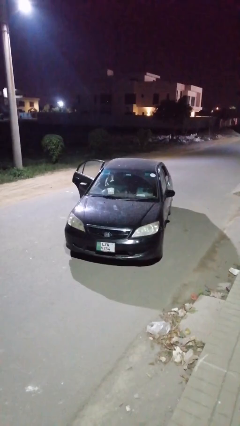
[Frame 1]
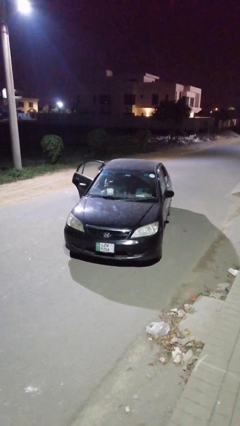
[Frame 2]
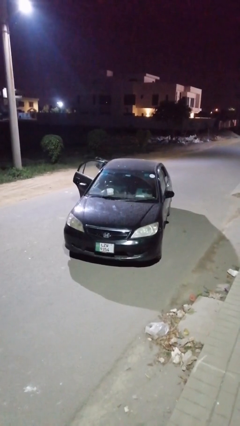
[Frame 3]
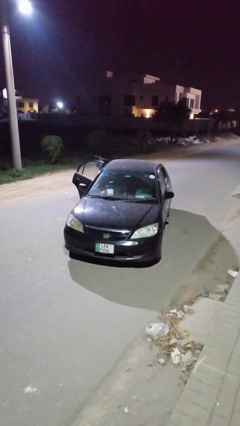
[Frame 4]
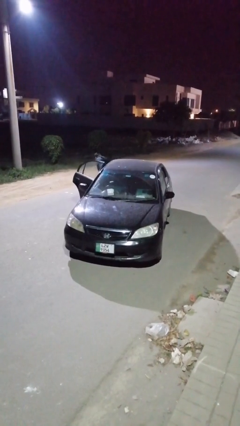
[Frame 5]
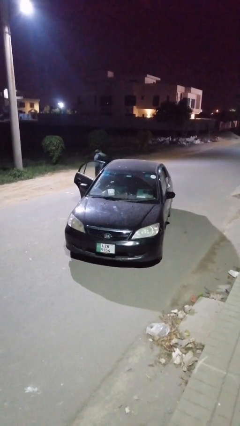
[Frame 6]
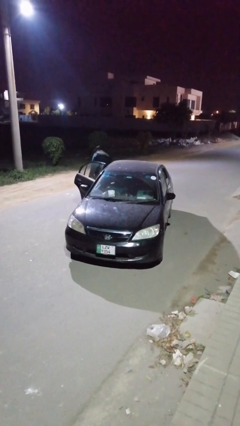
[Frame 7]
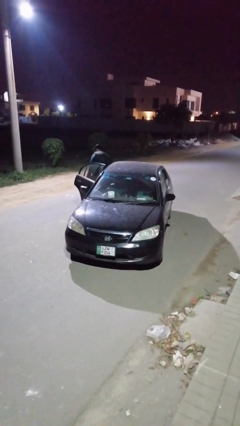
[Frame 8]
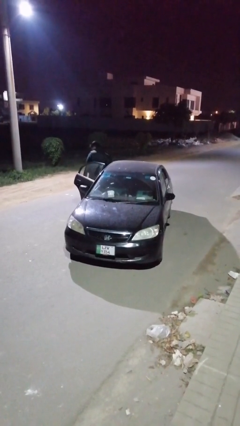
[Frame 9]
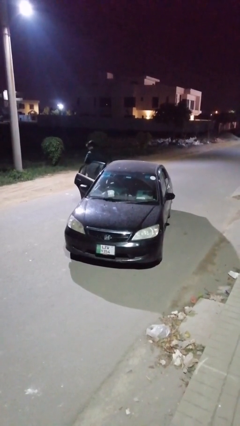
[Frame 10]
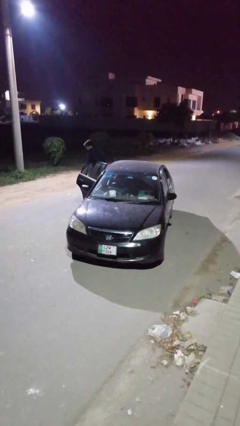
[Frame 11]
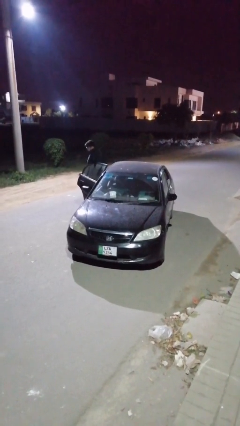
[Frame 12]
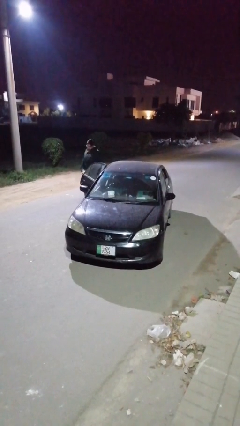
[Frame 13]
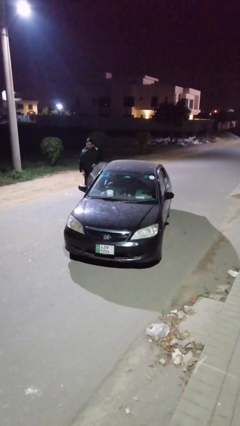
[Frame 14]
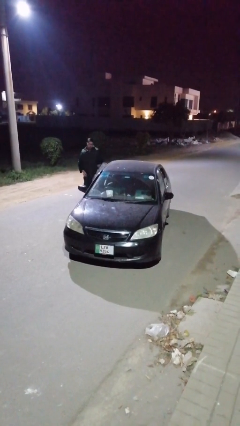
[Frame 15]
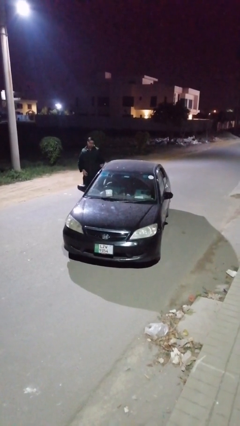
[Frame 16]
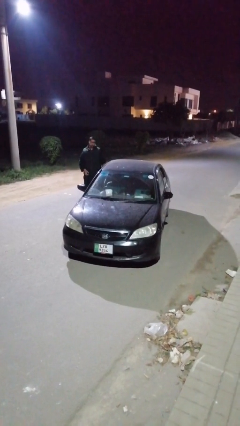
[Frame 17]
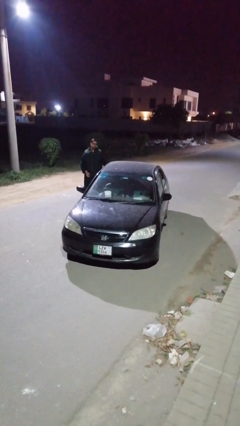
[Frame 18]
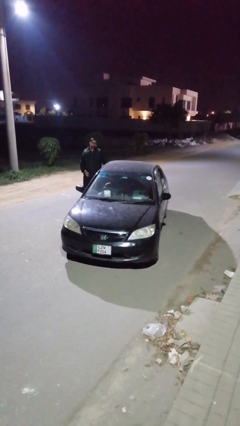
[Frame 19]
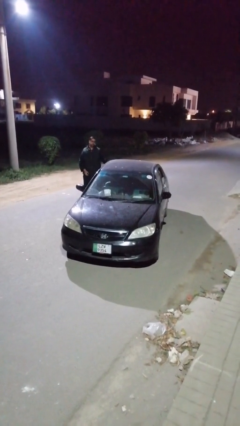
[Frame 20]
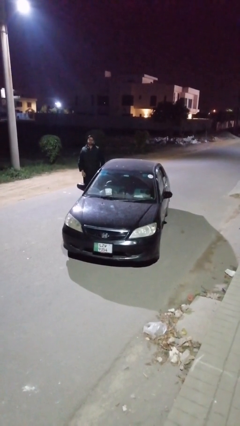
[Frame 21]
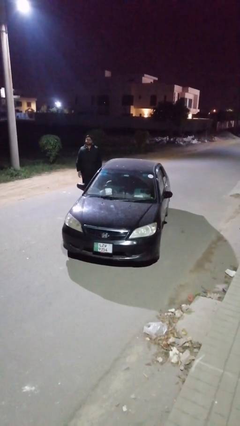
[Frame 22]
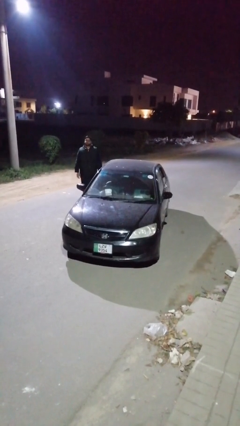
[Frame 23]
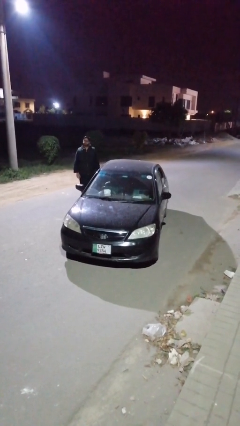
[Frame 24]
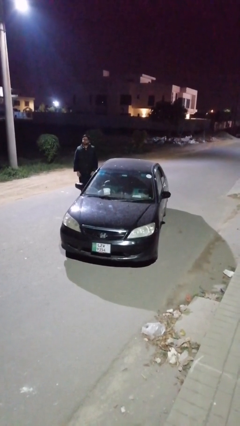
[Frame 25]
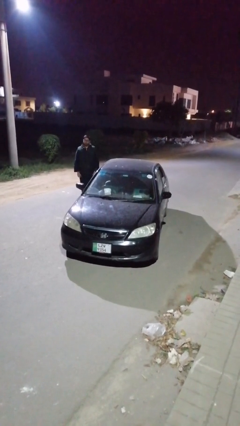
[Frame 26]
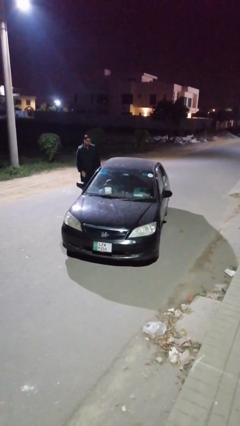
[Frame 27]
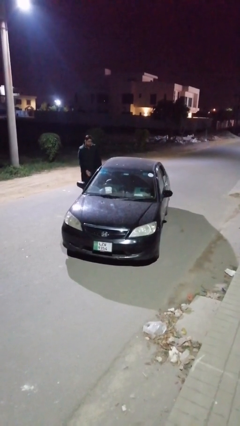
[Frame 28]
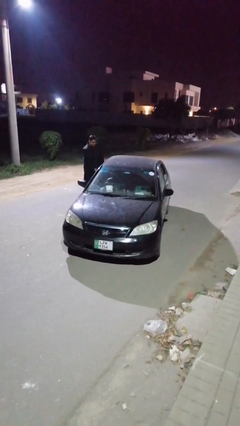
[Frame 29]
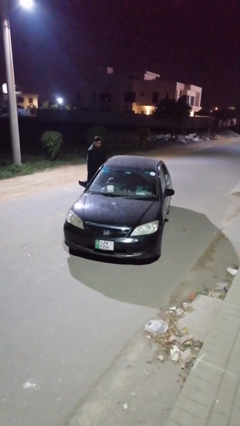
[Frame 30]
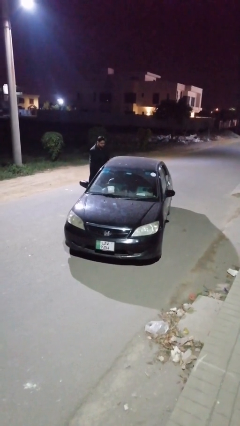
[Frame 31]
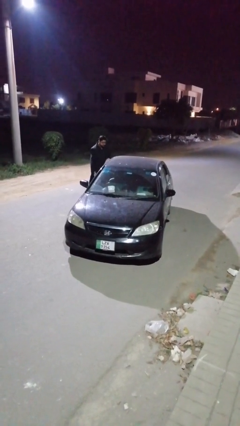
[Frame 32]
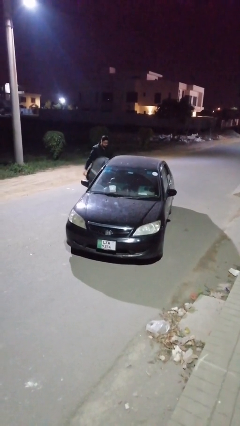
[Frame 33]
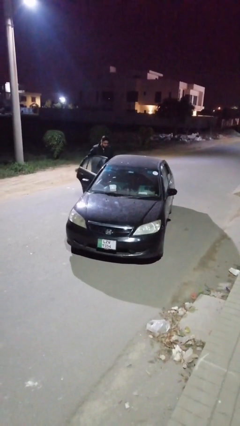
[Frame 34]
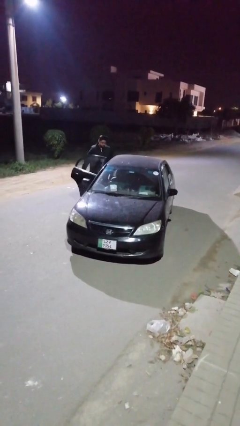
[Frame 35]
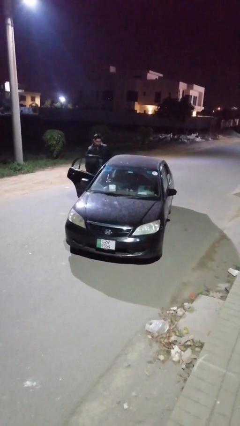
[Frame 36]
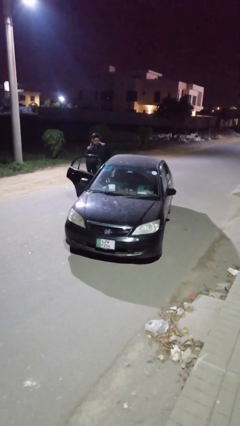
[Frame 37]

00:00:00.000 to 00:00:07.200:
car drops off person

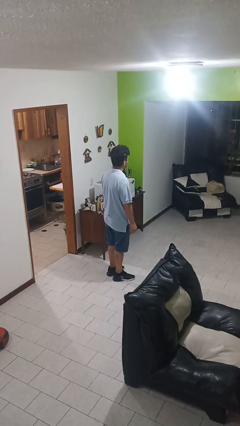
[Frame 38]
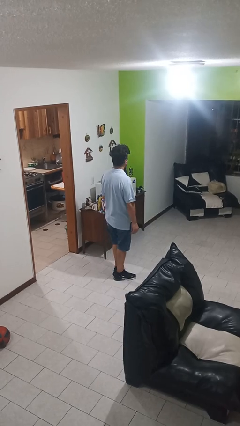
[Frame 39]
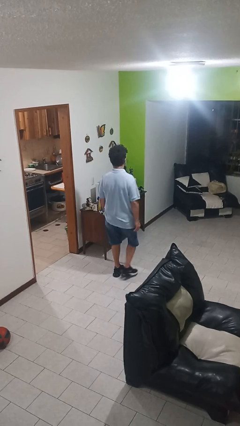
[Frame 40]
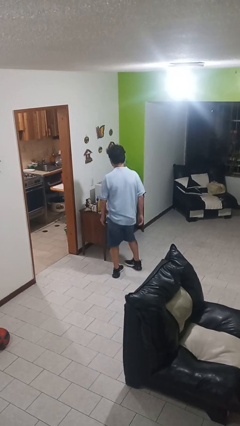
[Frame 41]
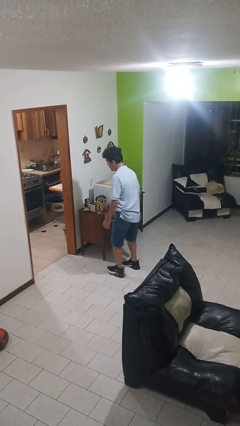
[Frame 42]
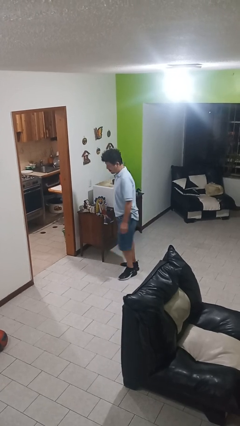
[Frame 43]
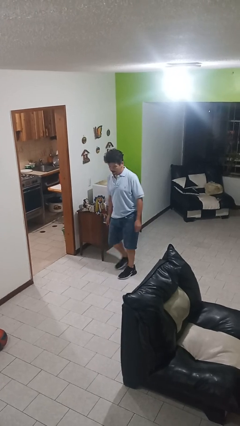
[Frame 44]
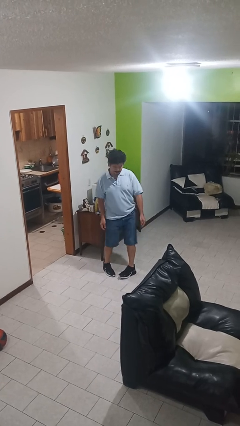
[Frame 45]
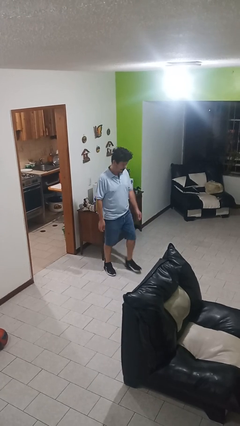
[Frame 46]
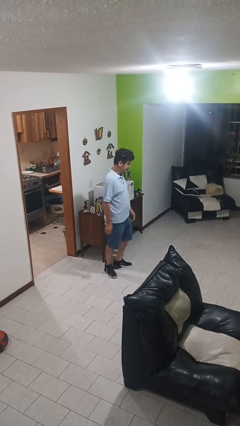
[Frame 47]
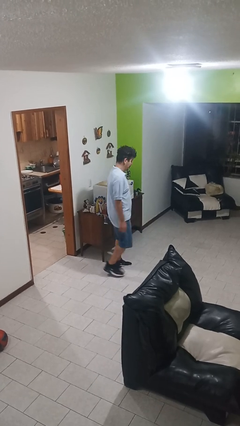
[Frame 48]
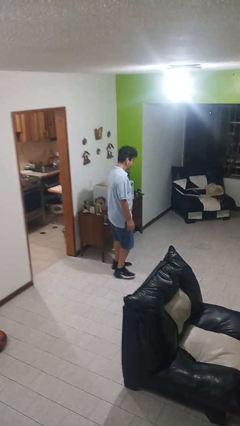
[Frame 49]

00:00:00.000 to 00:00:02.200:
person twirls

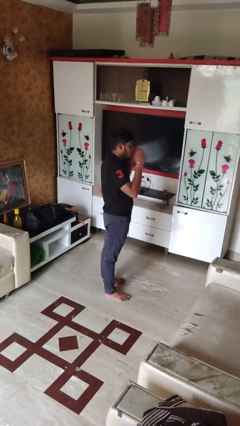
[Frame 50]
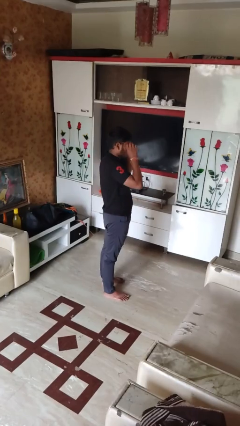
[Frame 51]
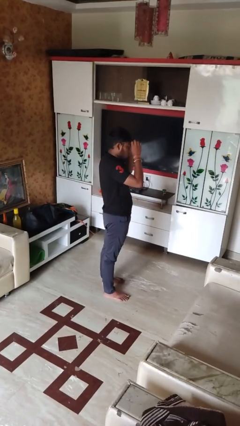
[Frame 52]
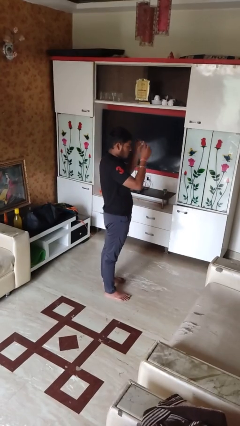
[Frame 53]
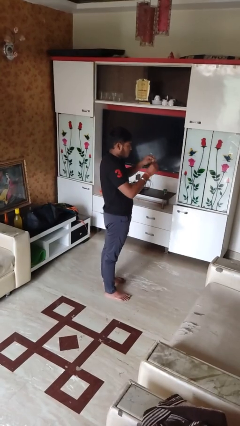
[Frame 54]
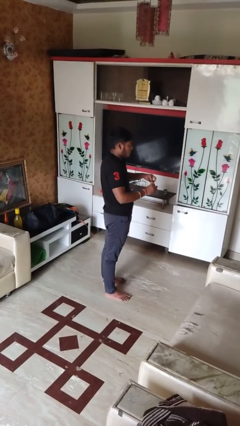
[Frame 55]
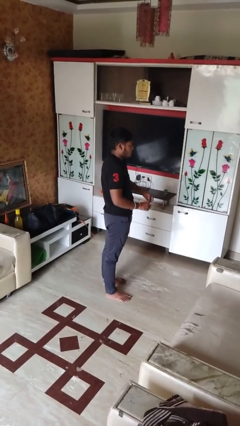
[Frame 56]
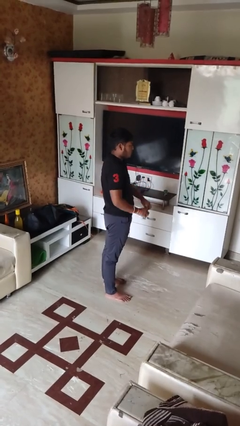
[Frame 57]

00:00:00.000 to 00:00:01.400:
person takes off sunglasses

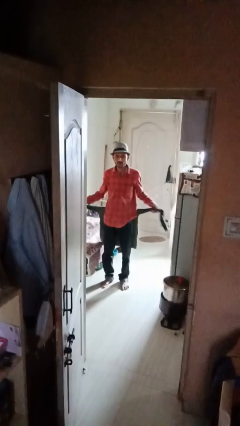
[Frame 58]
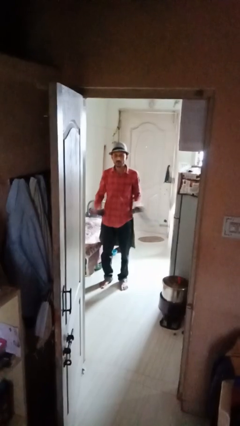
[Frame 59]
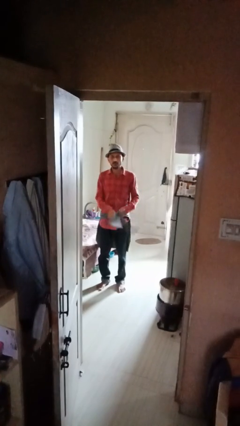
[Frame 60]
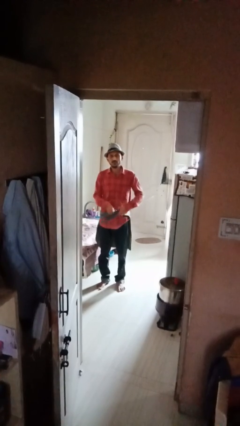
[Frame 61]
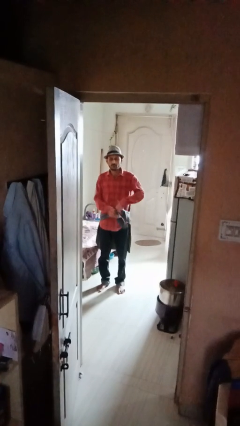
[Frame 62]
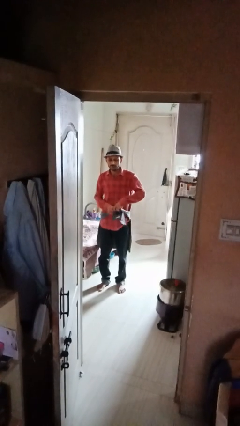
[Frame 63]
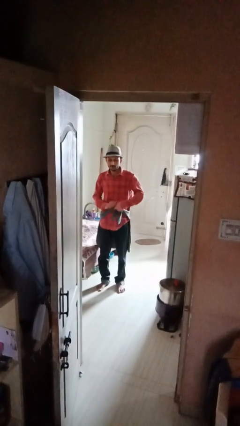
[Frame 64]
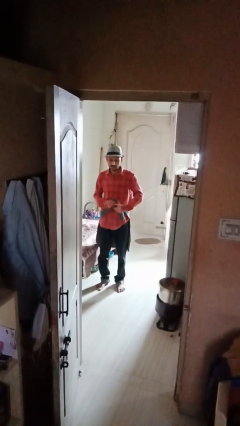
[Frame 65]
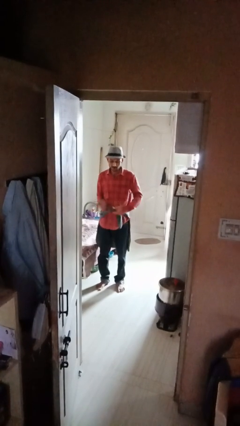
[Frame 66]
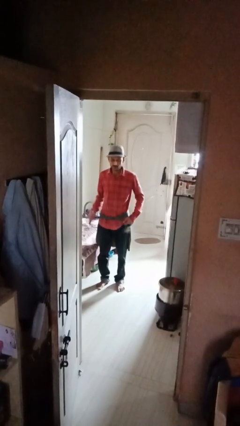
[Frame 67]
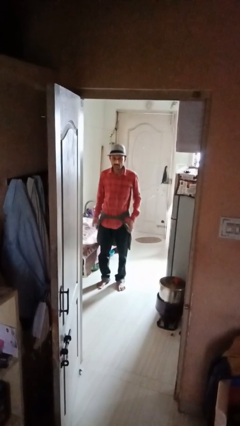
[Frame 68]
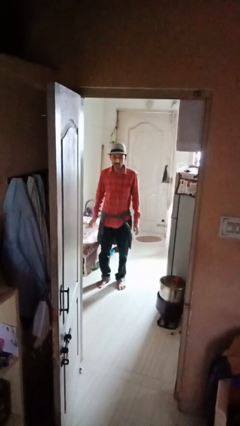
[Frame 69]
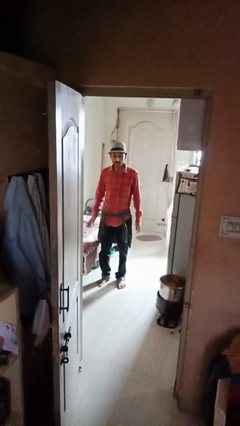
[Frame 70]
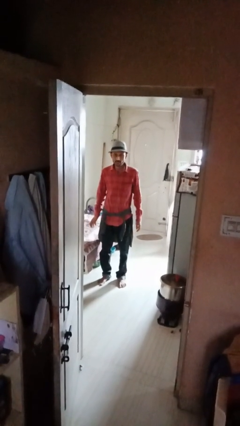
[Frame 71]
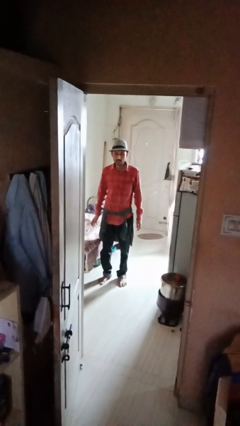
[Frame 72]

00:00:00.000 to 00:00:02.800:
person ties jacket around waist

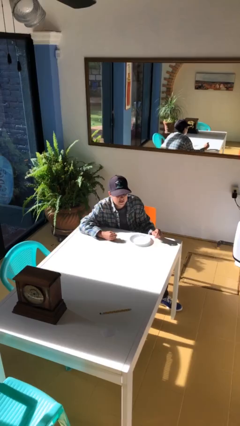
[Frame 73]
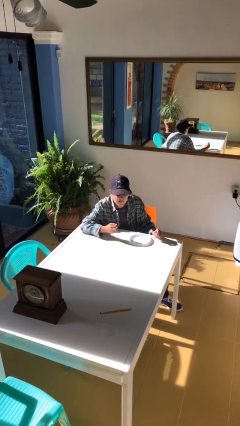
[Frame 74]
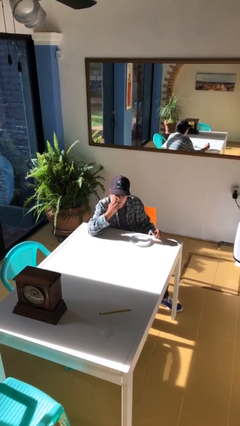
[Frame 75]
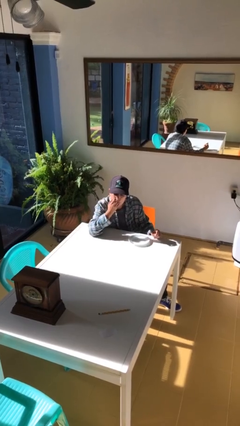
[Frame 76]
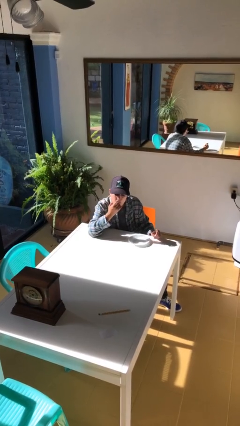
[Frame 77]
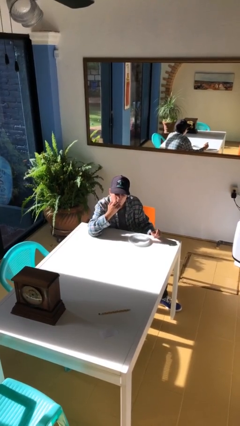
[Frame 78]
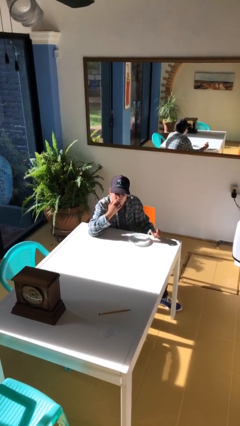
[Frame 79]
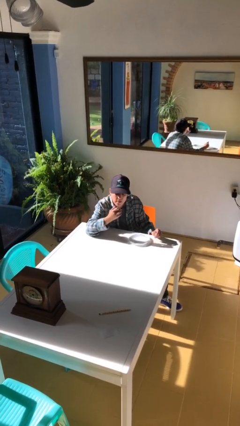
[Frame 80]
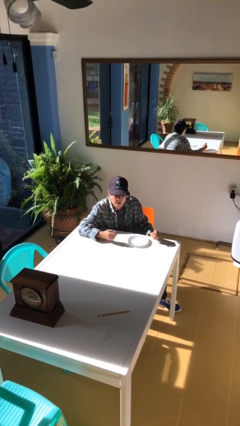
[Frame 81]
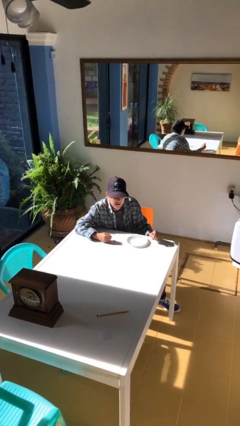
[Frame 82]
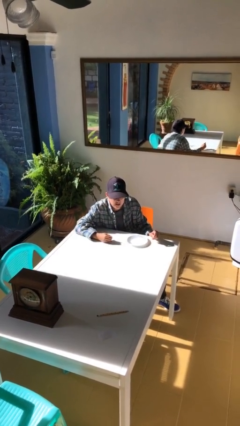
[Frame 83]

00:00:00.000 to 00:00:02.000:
person licks fingers

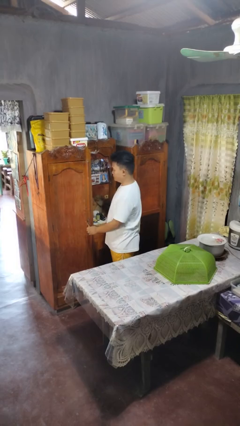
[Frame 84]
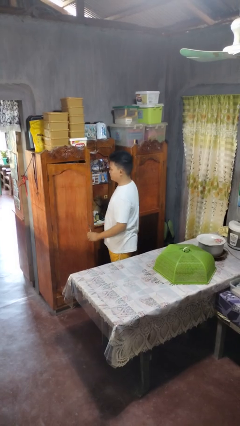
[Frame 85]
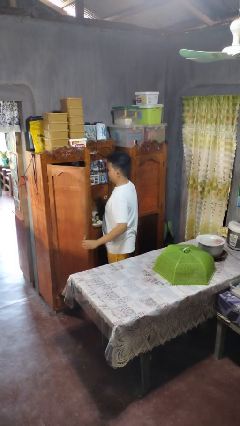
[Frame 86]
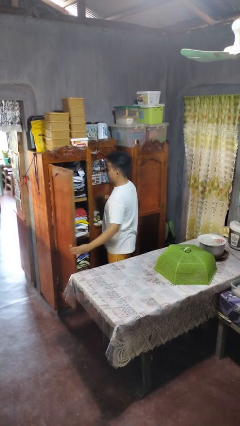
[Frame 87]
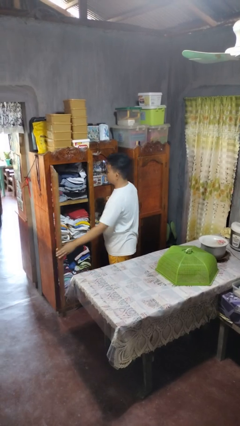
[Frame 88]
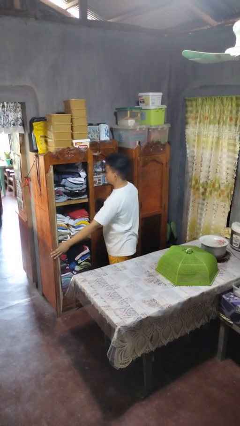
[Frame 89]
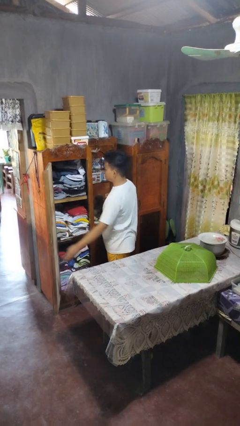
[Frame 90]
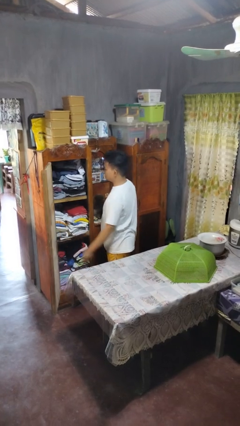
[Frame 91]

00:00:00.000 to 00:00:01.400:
person opens closet door

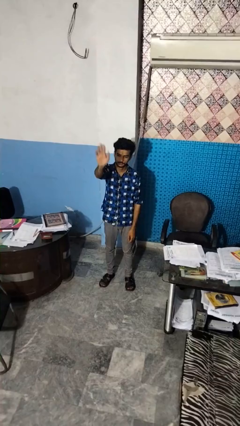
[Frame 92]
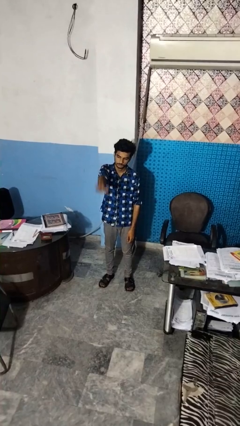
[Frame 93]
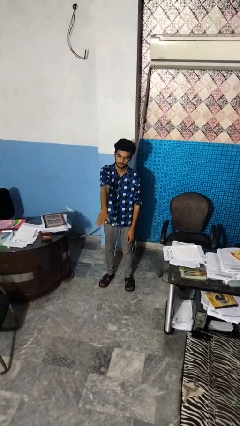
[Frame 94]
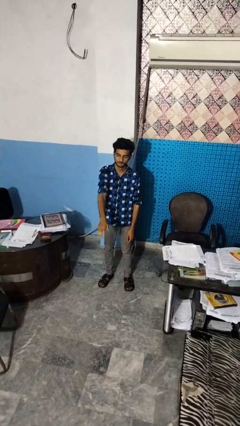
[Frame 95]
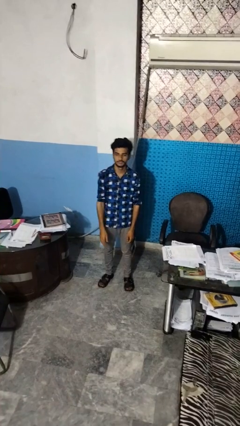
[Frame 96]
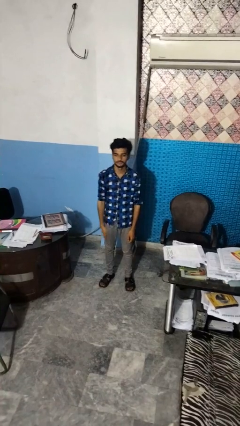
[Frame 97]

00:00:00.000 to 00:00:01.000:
person gestures swipe down
